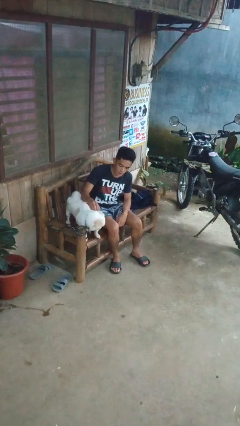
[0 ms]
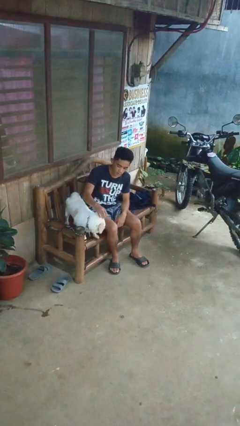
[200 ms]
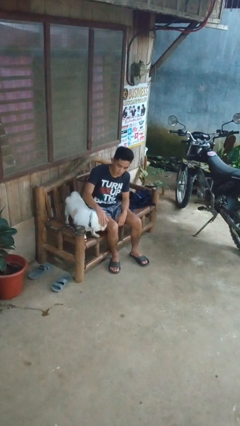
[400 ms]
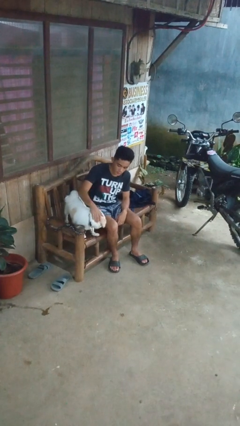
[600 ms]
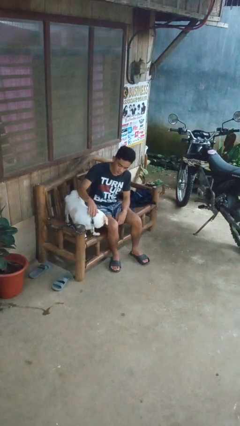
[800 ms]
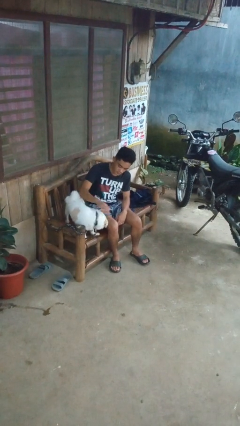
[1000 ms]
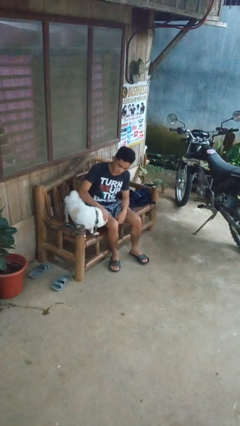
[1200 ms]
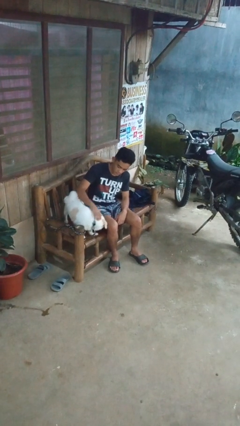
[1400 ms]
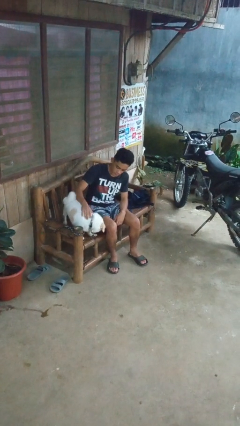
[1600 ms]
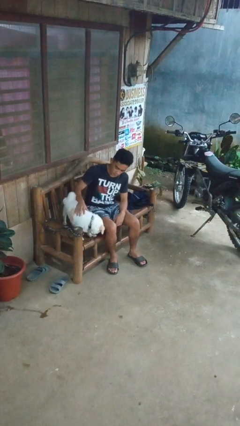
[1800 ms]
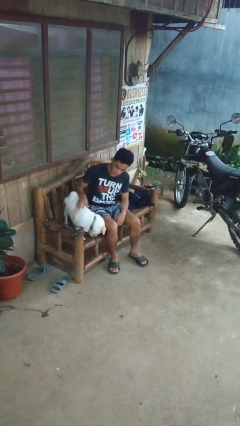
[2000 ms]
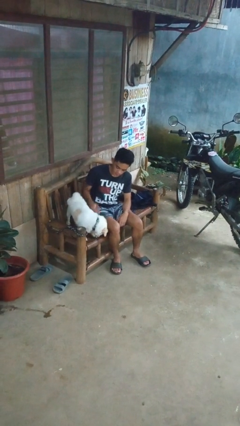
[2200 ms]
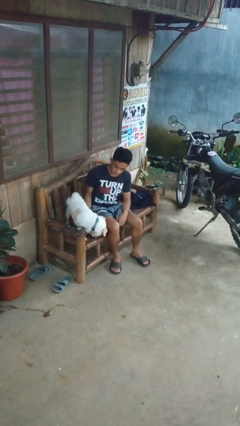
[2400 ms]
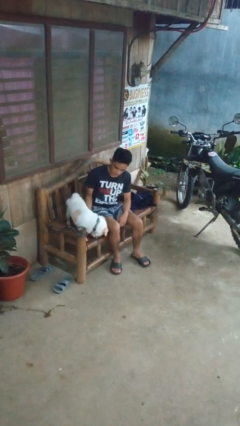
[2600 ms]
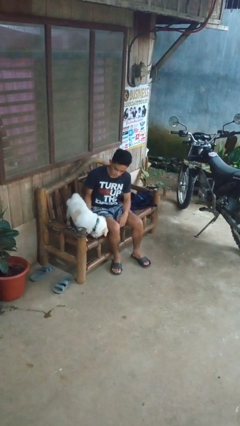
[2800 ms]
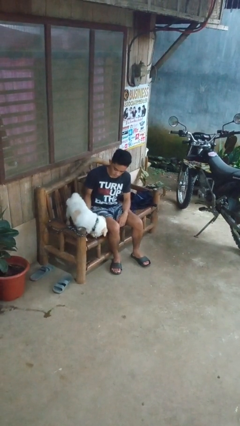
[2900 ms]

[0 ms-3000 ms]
person pets dog

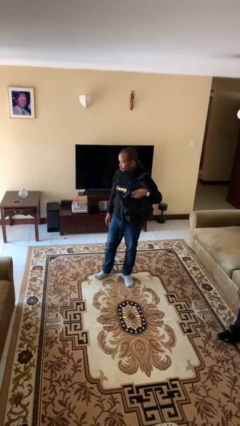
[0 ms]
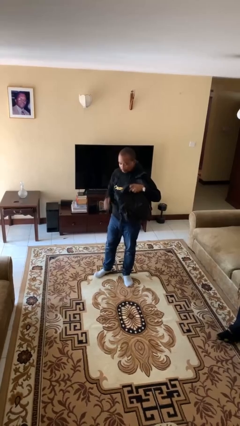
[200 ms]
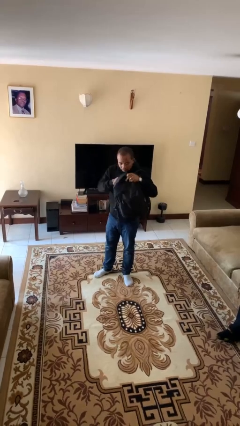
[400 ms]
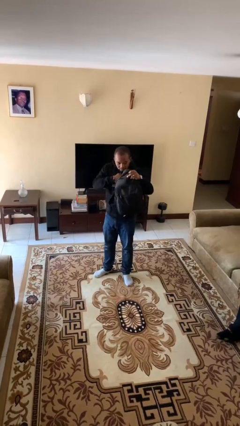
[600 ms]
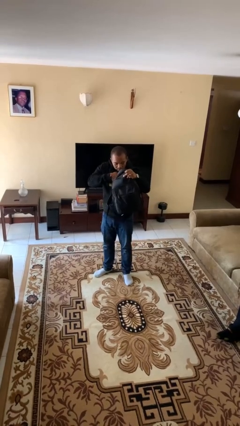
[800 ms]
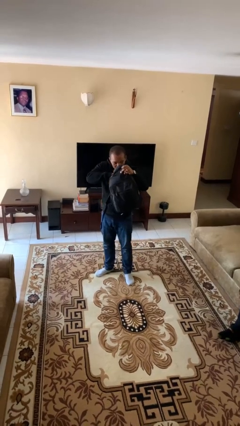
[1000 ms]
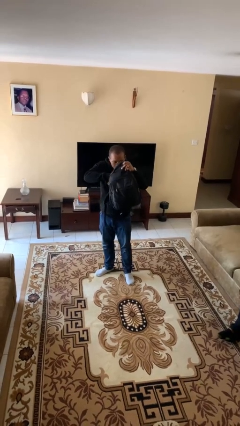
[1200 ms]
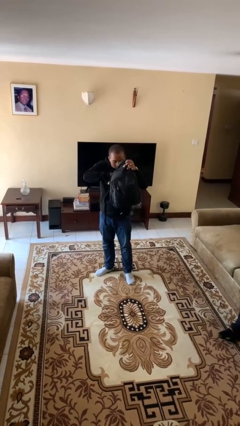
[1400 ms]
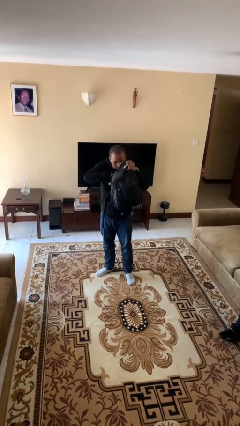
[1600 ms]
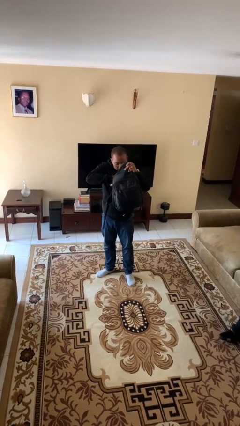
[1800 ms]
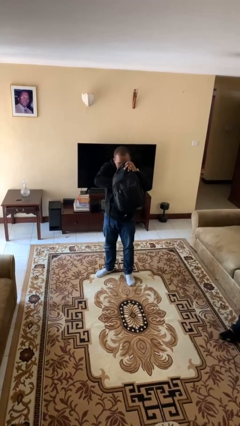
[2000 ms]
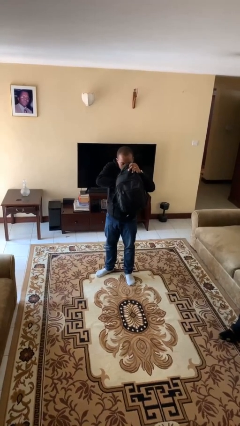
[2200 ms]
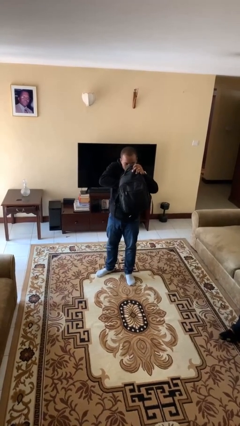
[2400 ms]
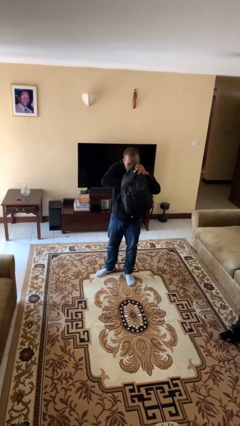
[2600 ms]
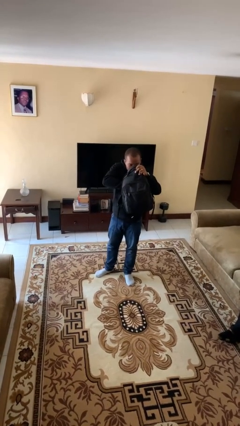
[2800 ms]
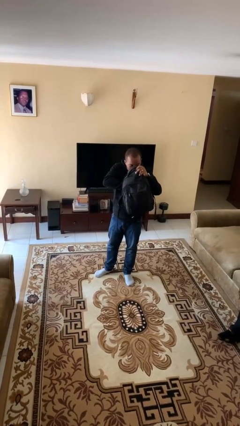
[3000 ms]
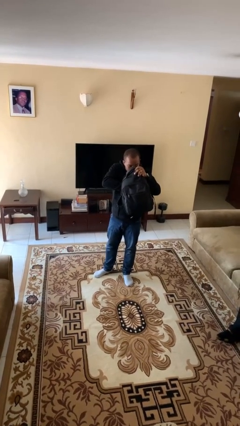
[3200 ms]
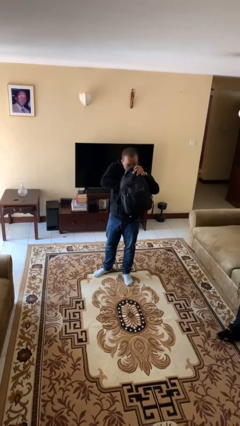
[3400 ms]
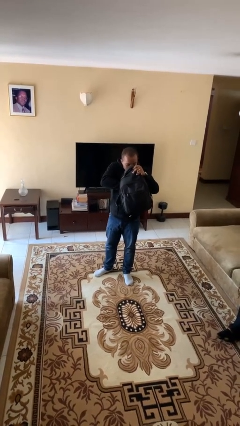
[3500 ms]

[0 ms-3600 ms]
person searches in backpack

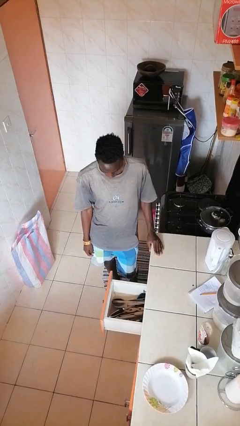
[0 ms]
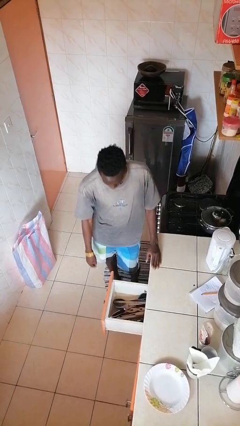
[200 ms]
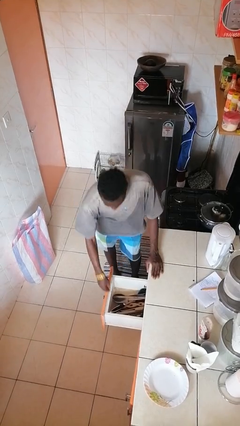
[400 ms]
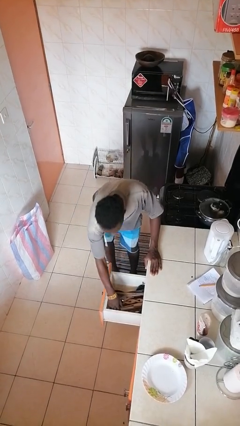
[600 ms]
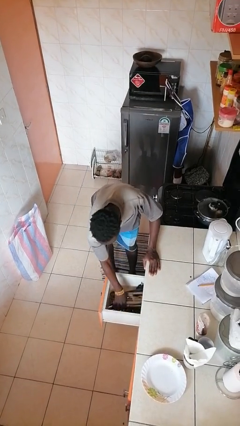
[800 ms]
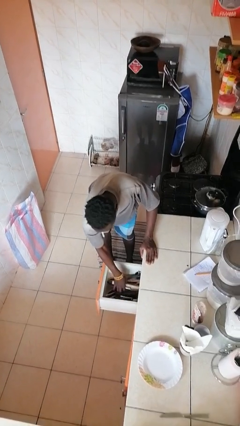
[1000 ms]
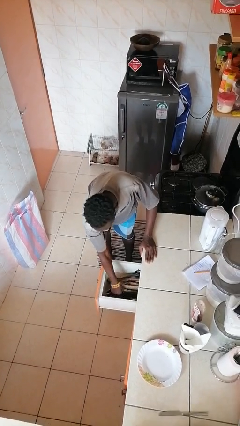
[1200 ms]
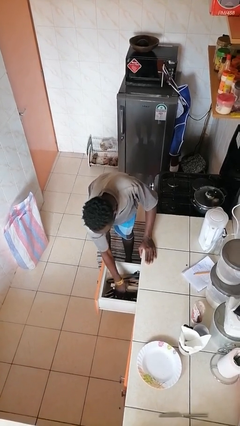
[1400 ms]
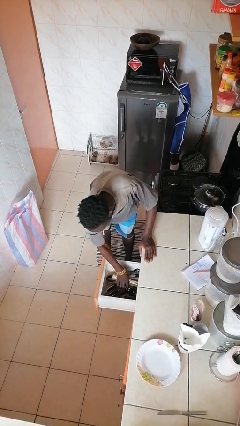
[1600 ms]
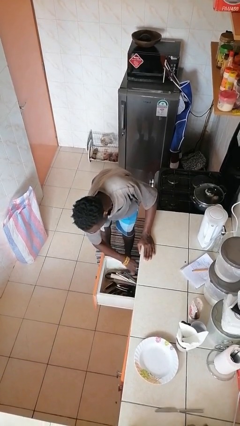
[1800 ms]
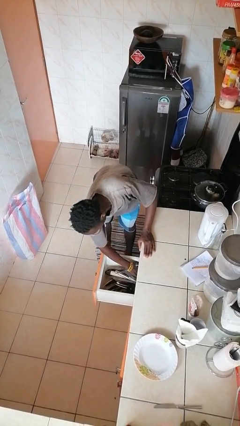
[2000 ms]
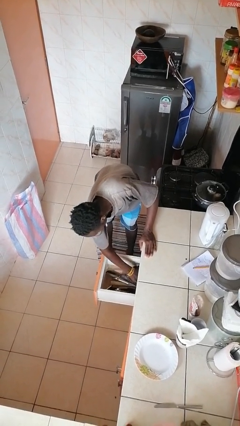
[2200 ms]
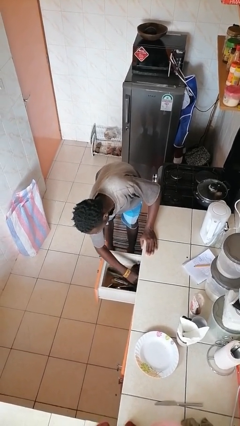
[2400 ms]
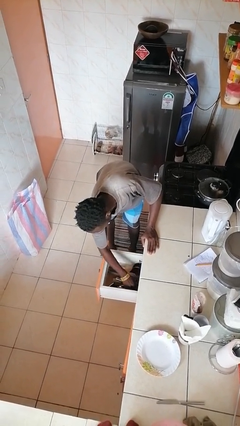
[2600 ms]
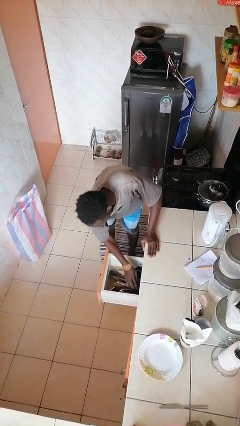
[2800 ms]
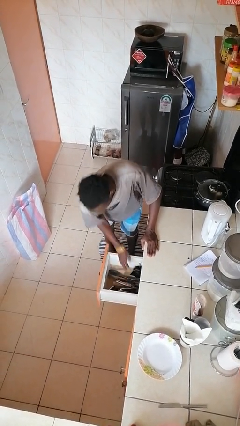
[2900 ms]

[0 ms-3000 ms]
person searches in kitchen drawer

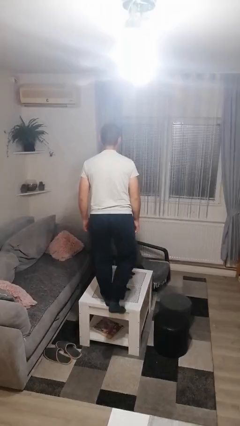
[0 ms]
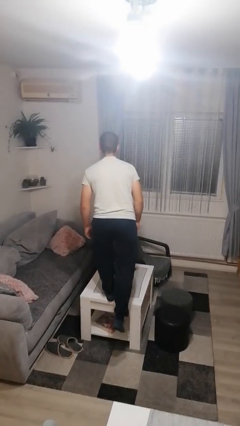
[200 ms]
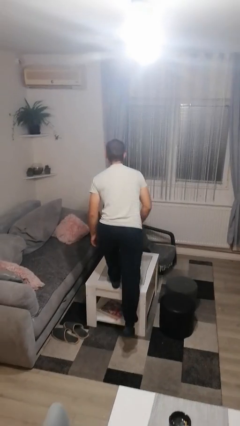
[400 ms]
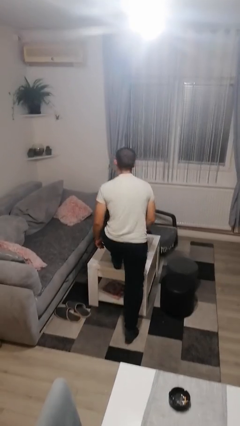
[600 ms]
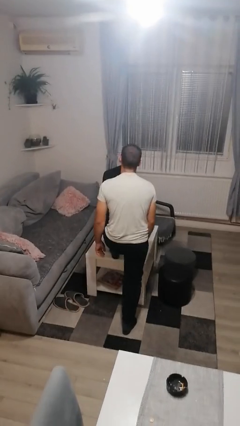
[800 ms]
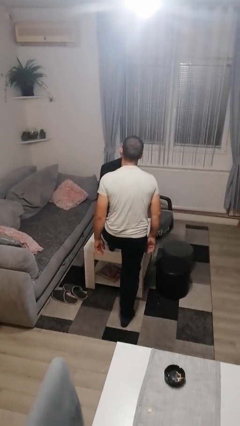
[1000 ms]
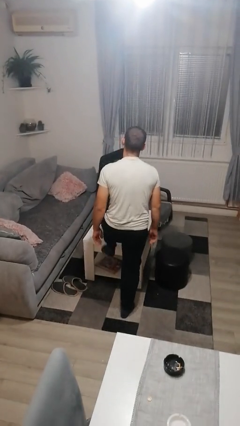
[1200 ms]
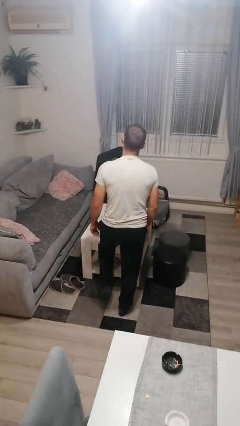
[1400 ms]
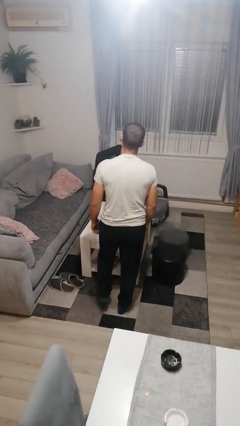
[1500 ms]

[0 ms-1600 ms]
person climbs off table

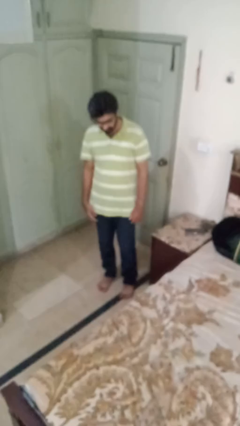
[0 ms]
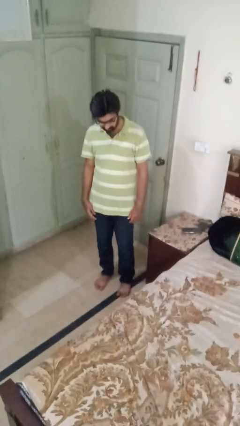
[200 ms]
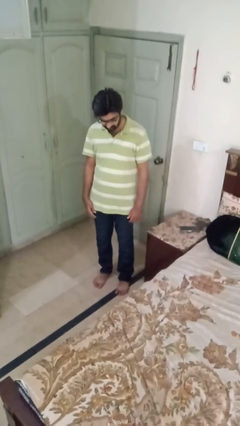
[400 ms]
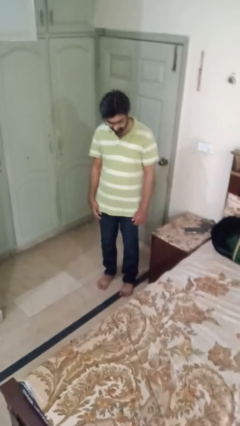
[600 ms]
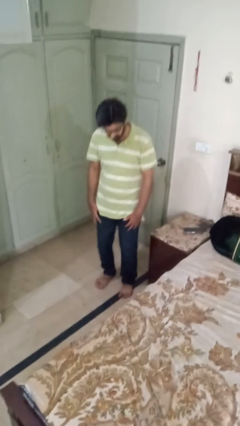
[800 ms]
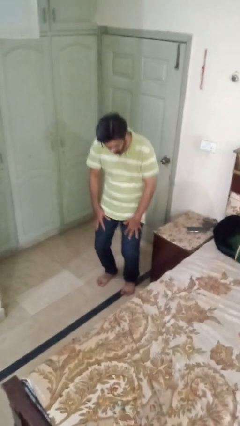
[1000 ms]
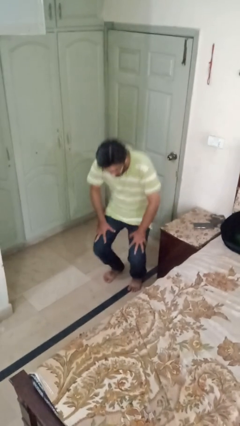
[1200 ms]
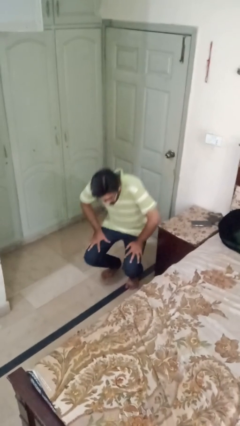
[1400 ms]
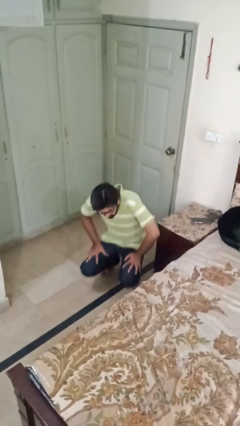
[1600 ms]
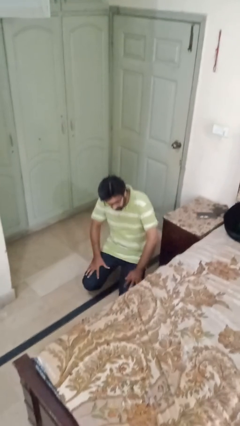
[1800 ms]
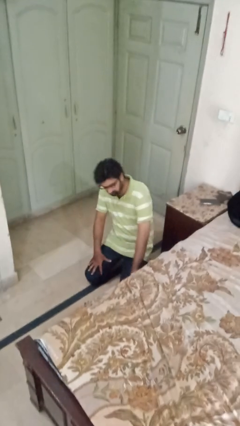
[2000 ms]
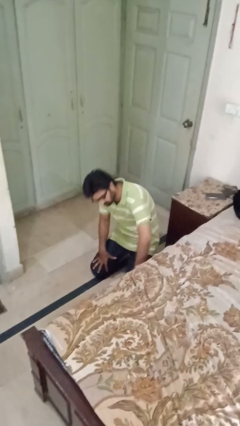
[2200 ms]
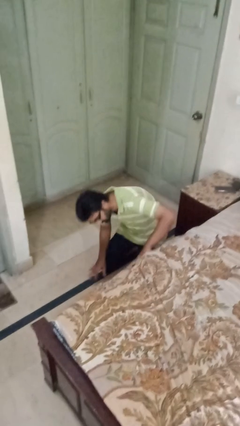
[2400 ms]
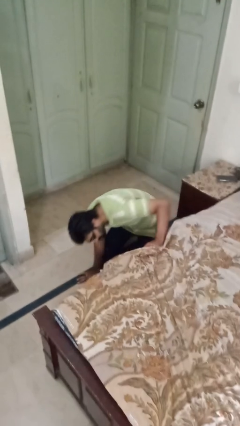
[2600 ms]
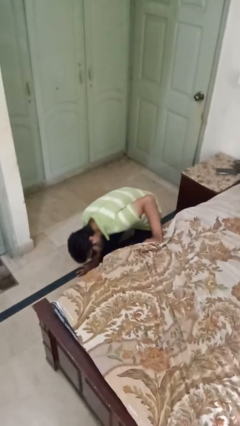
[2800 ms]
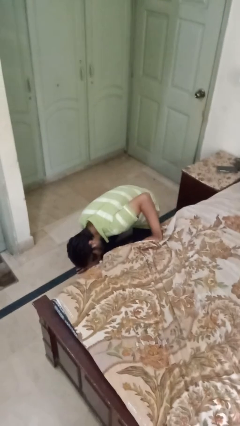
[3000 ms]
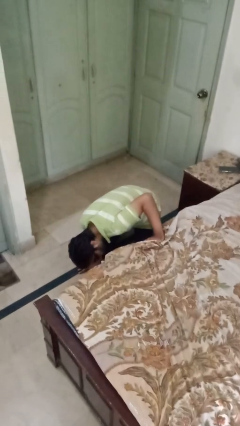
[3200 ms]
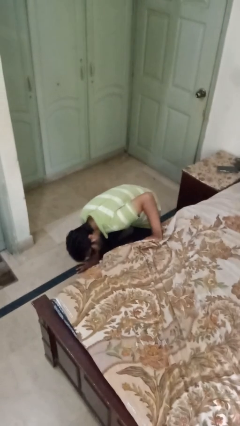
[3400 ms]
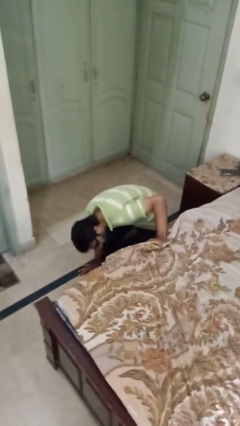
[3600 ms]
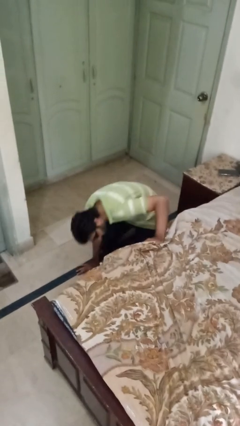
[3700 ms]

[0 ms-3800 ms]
person searches under bed

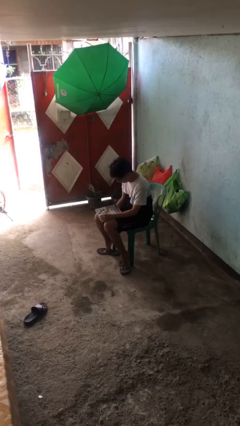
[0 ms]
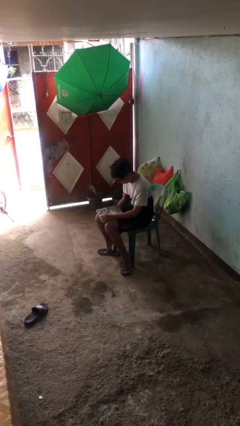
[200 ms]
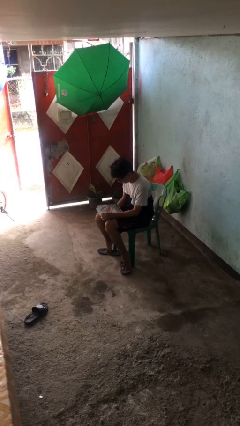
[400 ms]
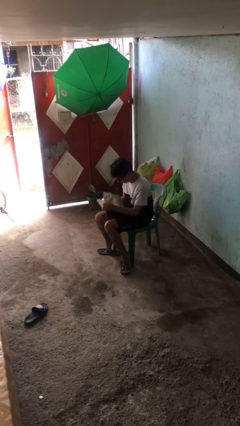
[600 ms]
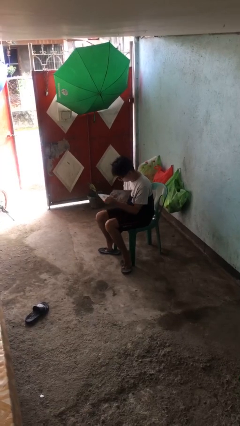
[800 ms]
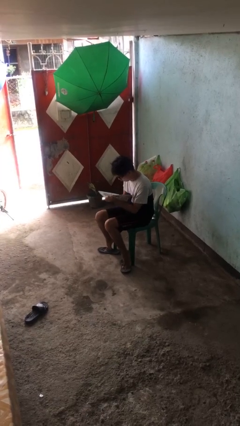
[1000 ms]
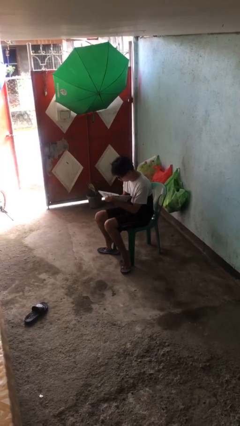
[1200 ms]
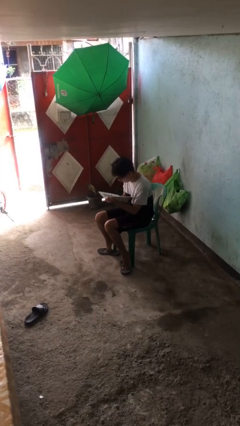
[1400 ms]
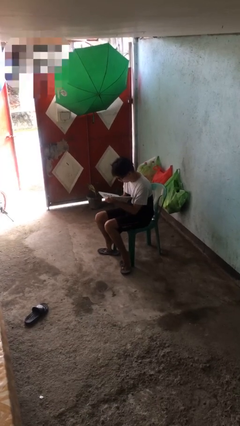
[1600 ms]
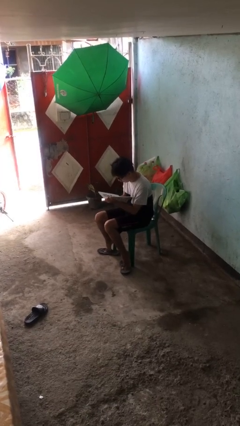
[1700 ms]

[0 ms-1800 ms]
person reads document

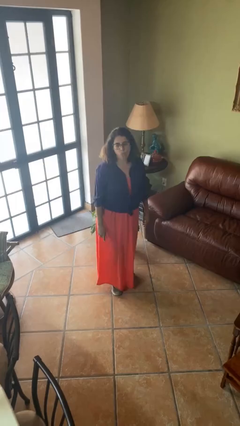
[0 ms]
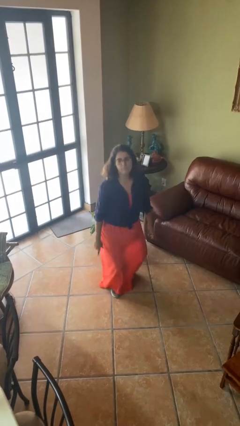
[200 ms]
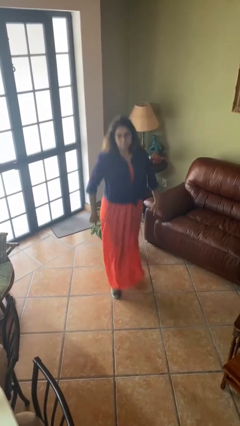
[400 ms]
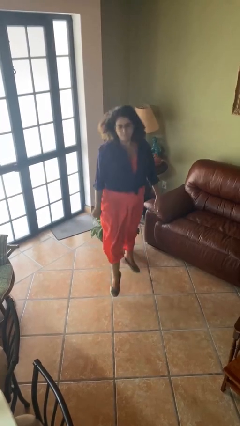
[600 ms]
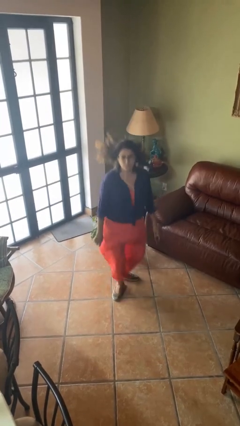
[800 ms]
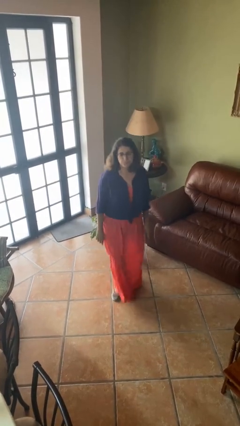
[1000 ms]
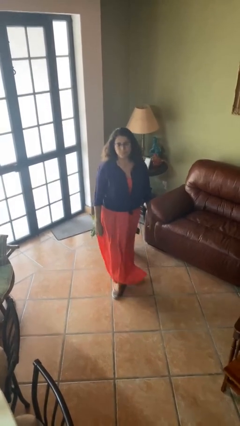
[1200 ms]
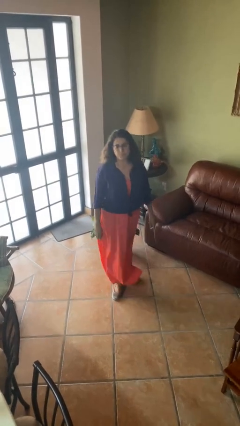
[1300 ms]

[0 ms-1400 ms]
person jumps
